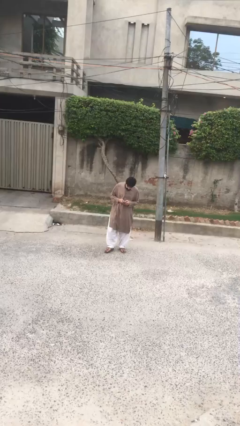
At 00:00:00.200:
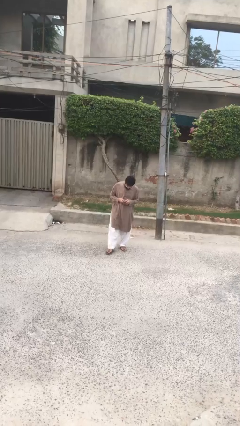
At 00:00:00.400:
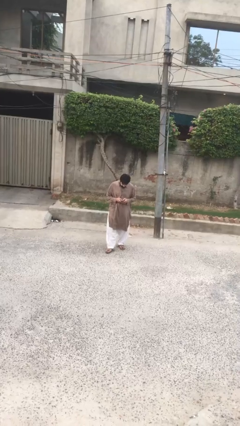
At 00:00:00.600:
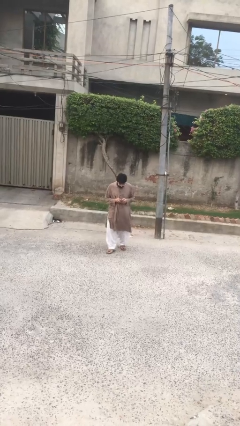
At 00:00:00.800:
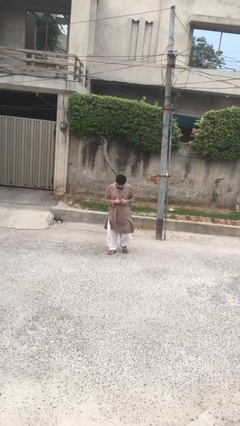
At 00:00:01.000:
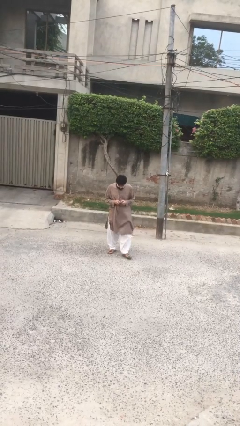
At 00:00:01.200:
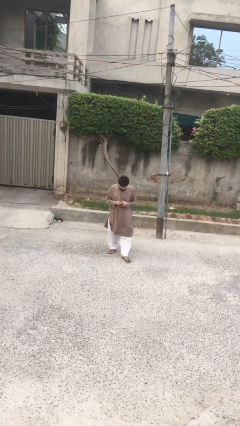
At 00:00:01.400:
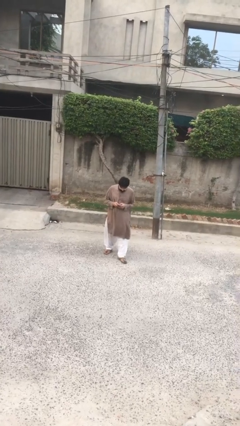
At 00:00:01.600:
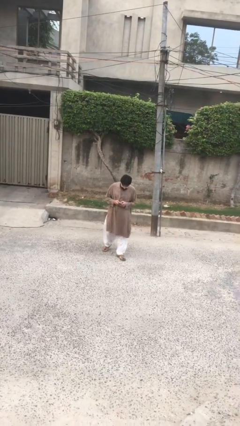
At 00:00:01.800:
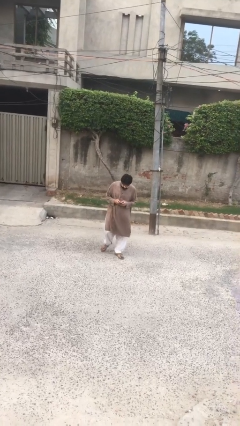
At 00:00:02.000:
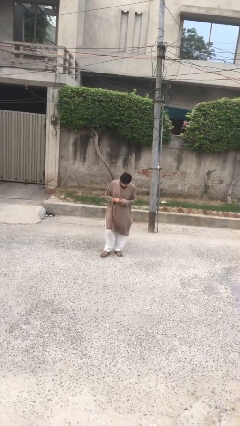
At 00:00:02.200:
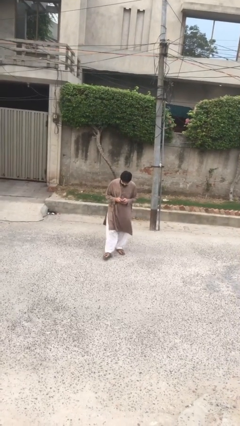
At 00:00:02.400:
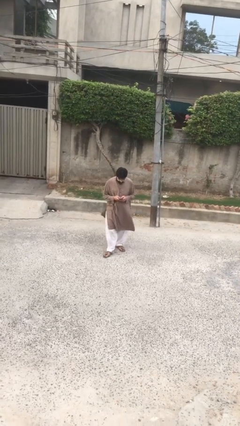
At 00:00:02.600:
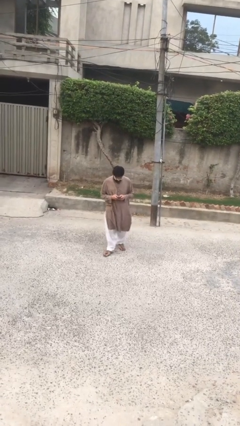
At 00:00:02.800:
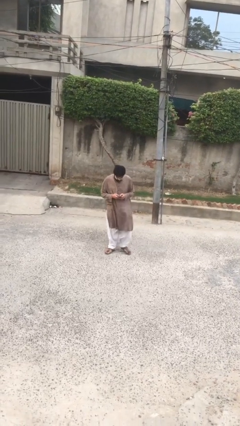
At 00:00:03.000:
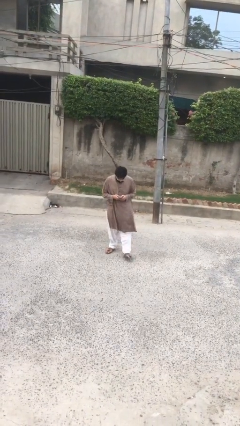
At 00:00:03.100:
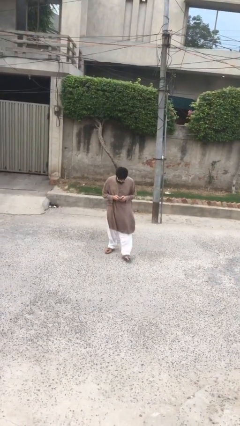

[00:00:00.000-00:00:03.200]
person texts on phone

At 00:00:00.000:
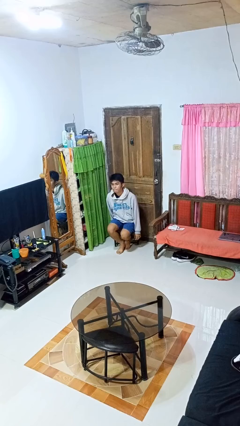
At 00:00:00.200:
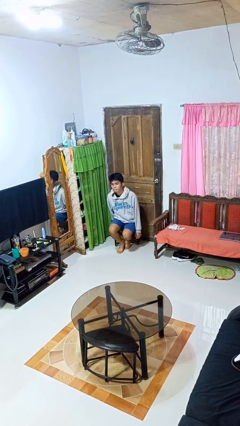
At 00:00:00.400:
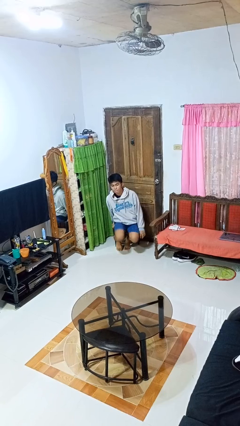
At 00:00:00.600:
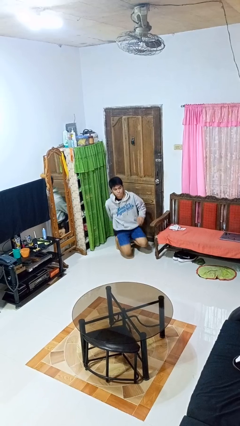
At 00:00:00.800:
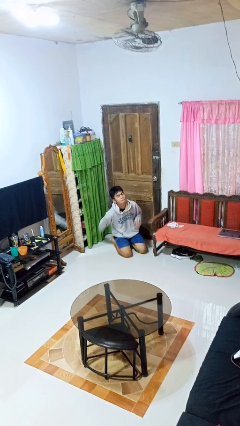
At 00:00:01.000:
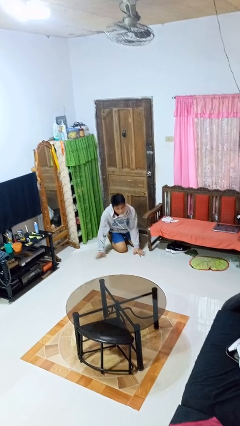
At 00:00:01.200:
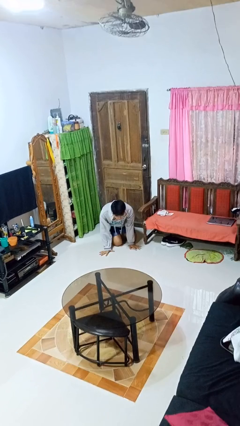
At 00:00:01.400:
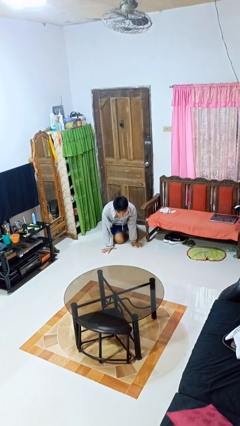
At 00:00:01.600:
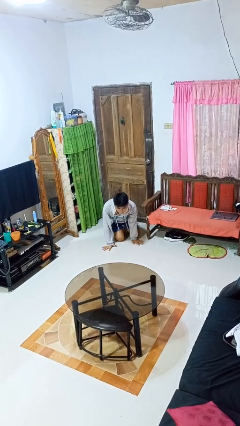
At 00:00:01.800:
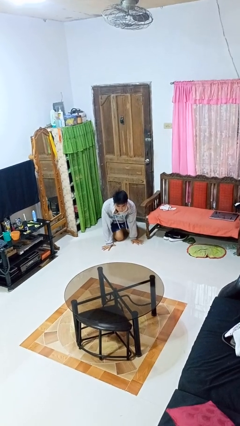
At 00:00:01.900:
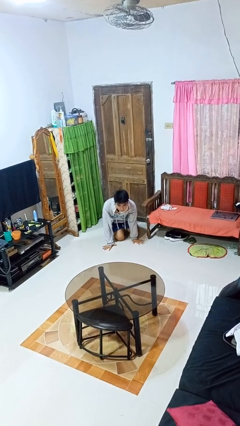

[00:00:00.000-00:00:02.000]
person falls from chair

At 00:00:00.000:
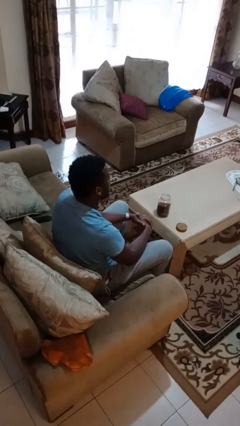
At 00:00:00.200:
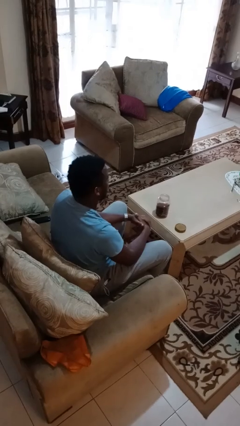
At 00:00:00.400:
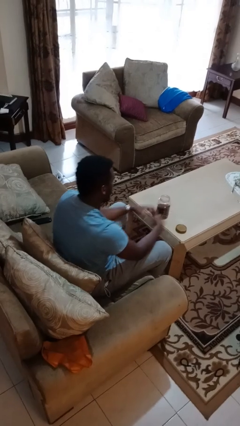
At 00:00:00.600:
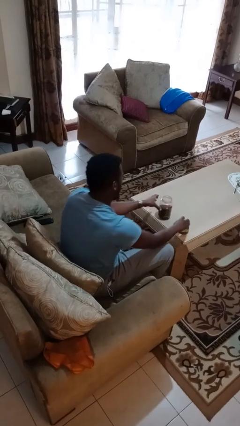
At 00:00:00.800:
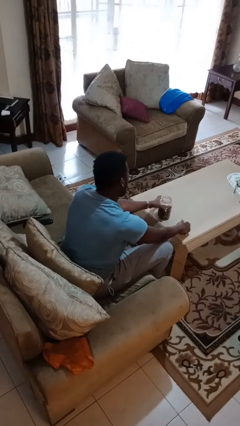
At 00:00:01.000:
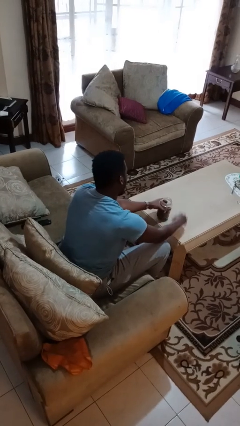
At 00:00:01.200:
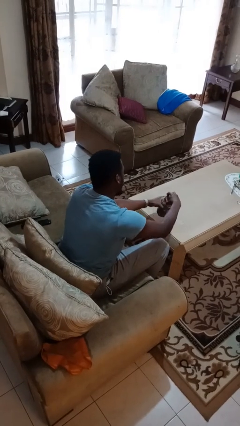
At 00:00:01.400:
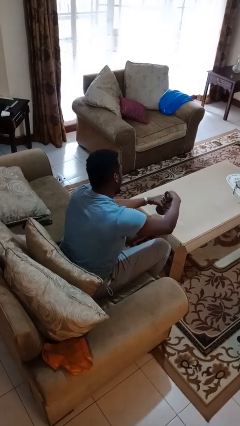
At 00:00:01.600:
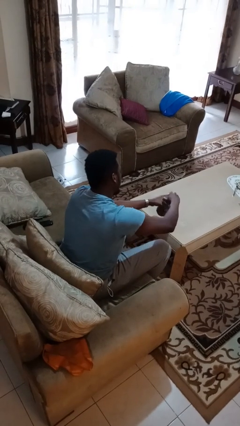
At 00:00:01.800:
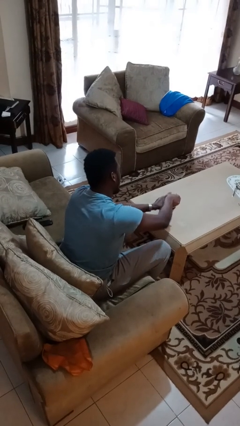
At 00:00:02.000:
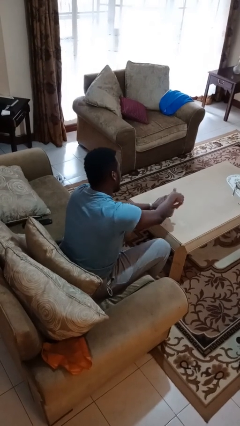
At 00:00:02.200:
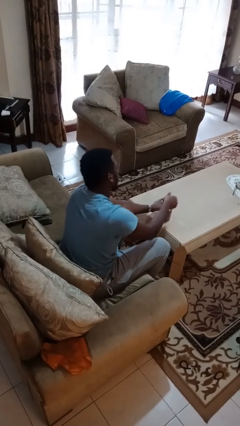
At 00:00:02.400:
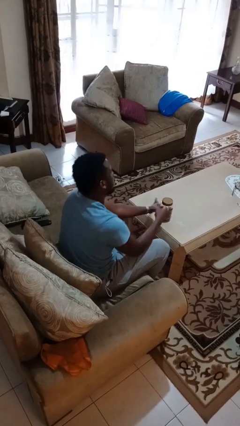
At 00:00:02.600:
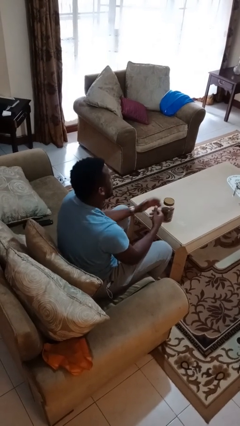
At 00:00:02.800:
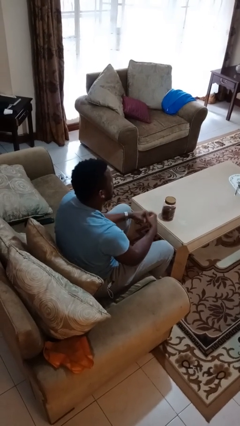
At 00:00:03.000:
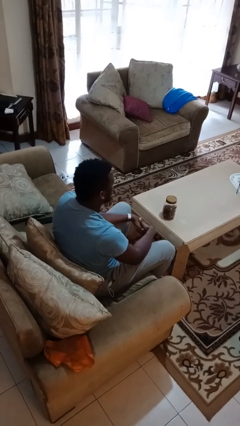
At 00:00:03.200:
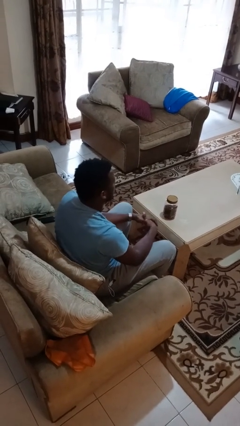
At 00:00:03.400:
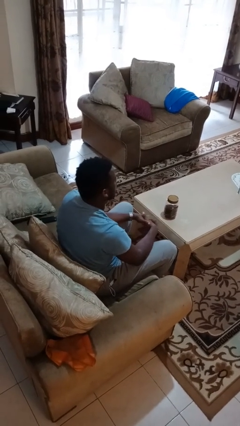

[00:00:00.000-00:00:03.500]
person closes jar

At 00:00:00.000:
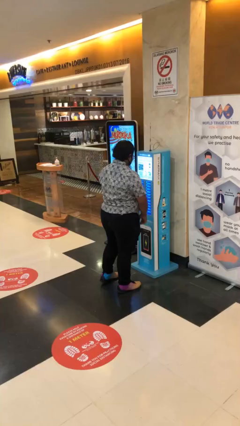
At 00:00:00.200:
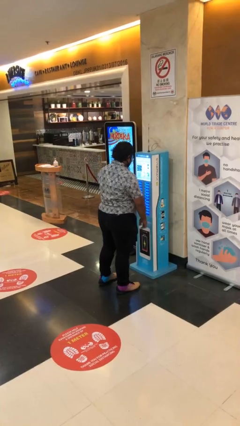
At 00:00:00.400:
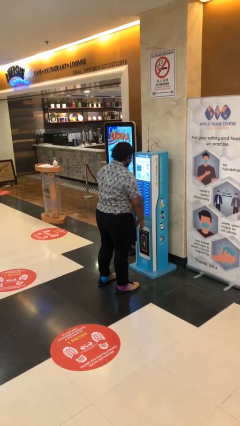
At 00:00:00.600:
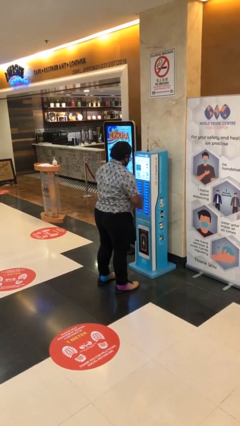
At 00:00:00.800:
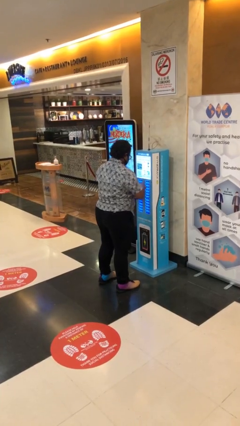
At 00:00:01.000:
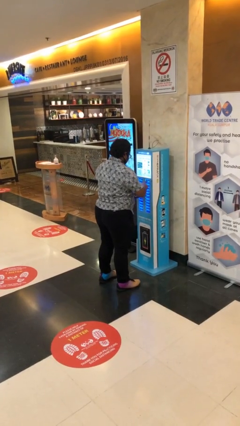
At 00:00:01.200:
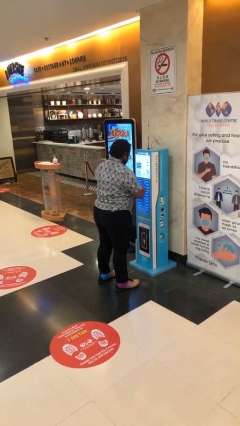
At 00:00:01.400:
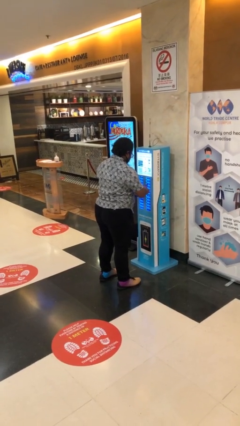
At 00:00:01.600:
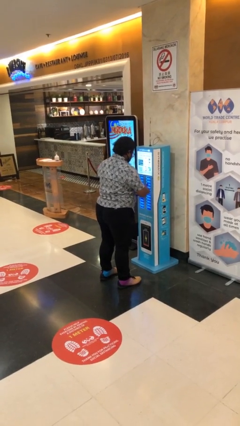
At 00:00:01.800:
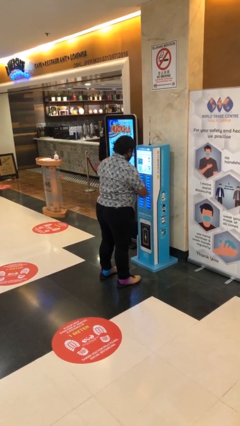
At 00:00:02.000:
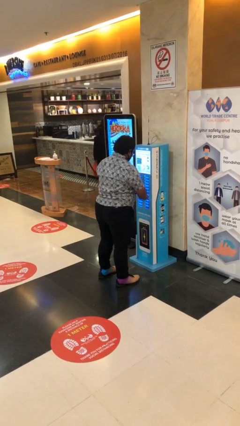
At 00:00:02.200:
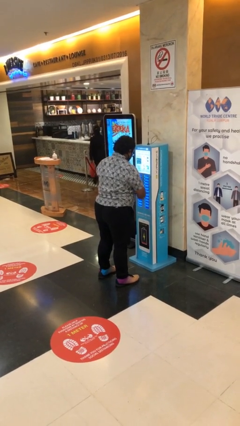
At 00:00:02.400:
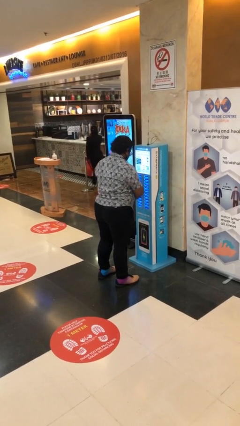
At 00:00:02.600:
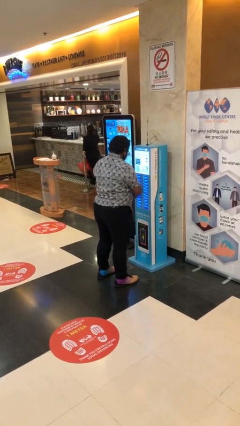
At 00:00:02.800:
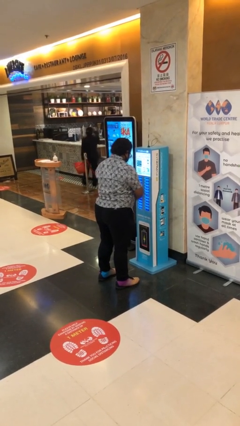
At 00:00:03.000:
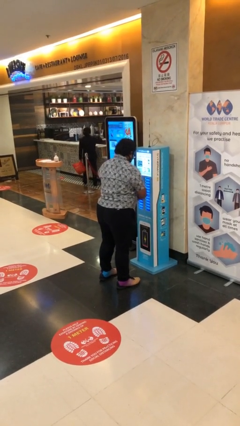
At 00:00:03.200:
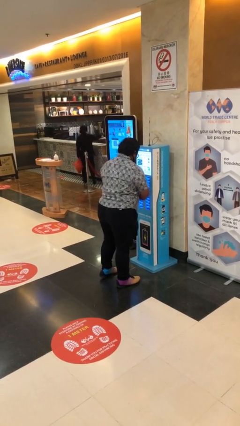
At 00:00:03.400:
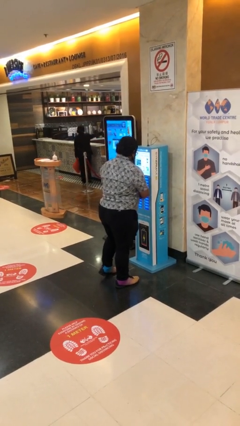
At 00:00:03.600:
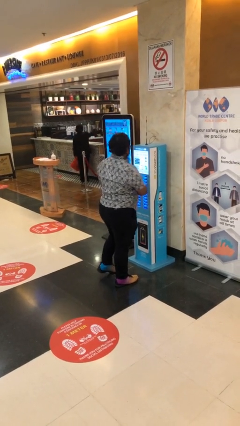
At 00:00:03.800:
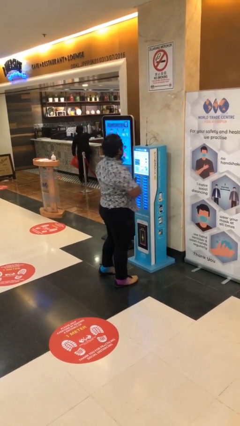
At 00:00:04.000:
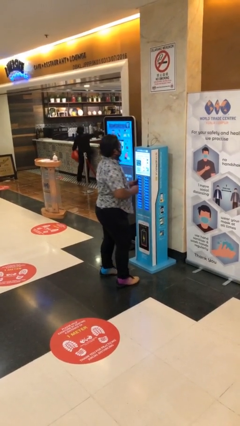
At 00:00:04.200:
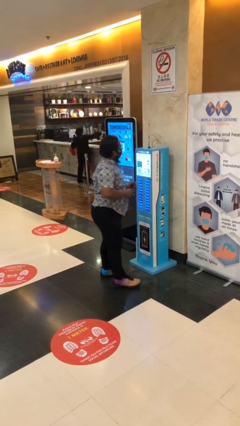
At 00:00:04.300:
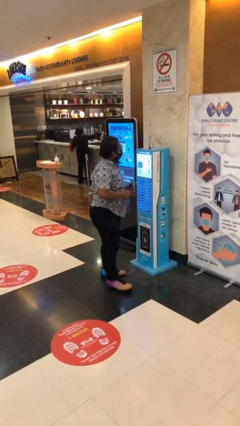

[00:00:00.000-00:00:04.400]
person purchases from machine

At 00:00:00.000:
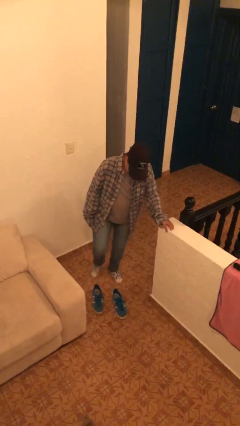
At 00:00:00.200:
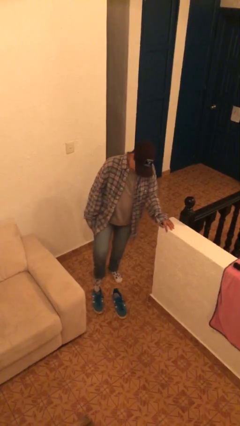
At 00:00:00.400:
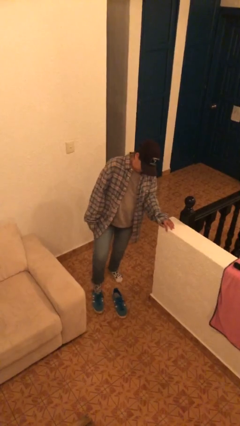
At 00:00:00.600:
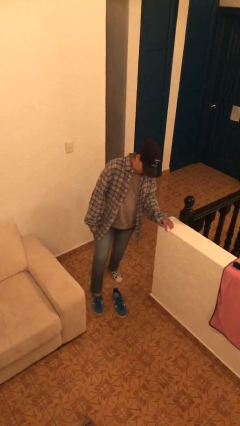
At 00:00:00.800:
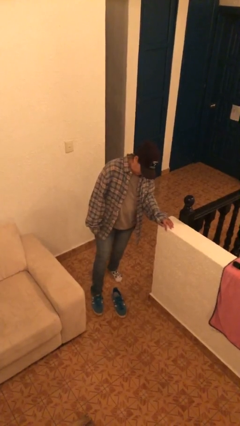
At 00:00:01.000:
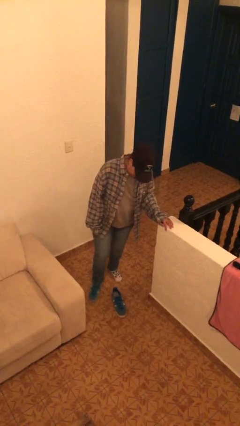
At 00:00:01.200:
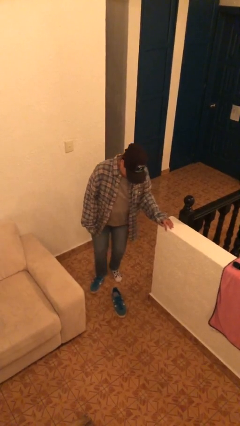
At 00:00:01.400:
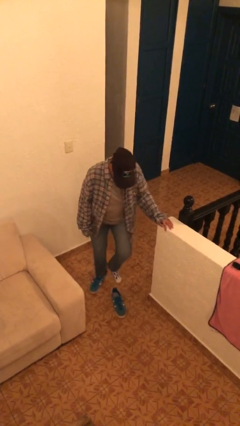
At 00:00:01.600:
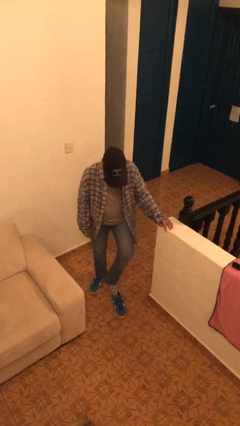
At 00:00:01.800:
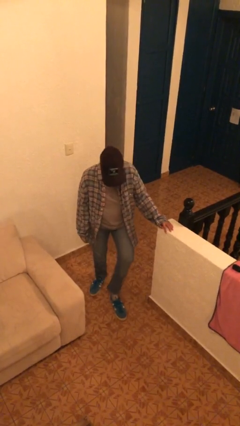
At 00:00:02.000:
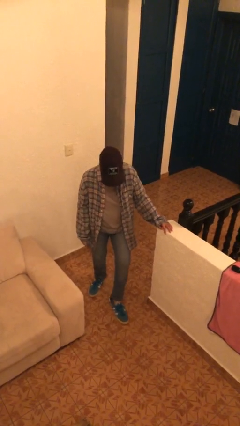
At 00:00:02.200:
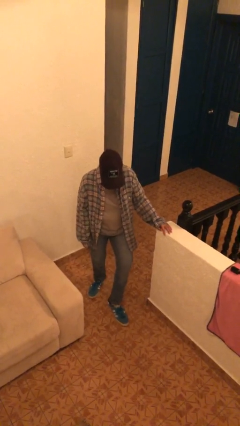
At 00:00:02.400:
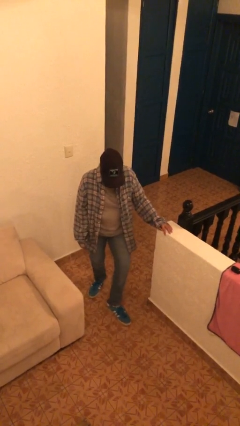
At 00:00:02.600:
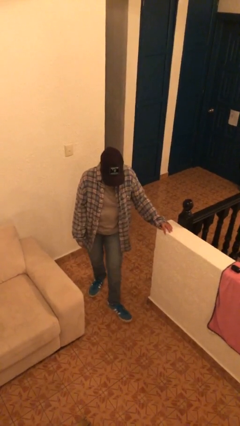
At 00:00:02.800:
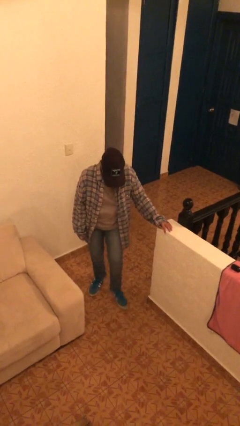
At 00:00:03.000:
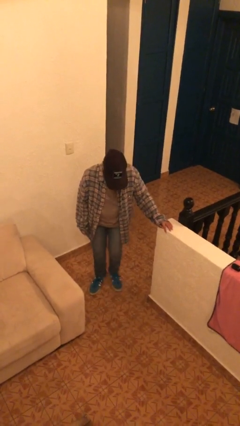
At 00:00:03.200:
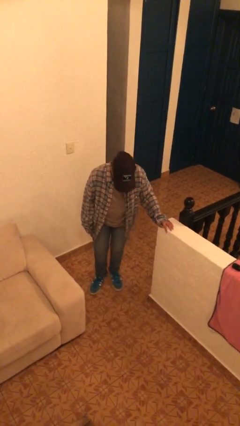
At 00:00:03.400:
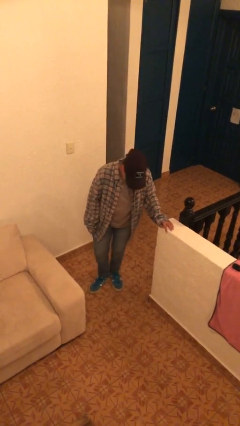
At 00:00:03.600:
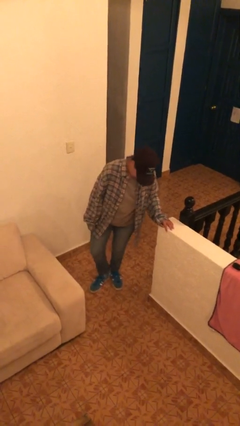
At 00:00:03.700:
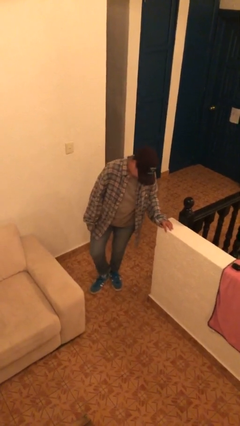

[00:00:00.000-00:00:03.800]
person puts on shoes

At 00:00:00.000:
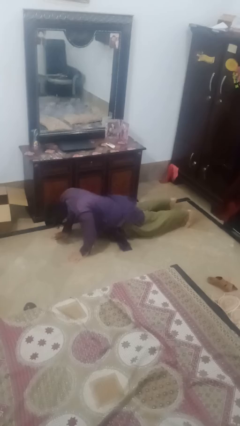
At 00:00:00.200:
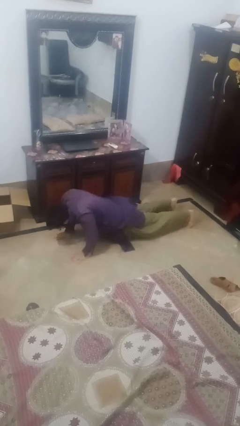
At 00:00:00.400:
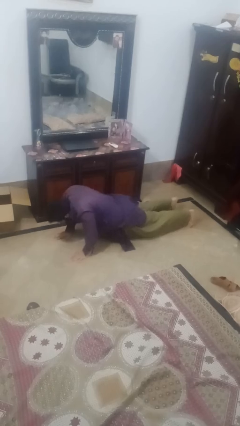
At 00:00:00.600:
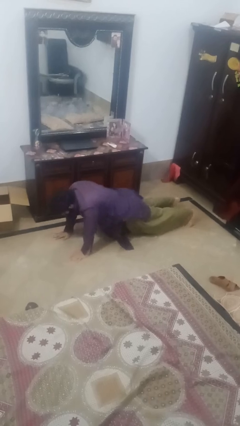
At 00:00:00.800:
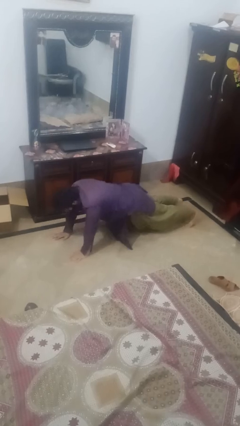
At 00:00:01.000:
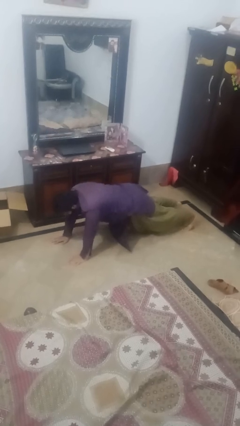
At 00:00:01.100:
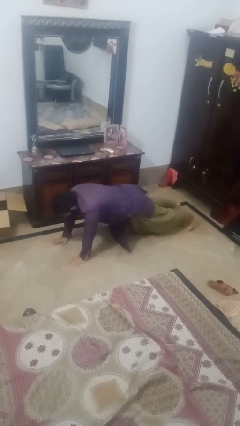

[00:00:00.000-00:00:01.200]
person exercises with pushup
